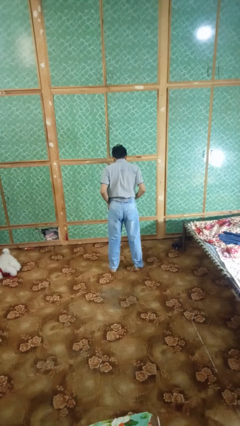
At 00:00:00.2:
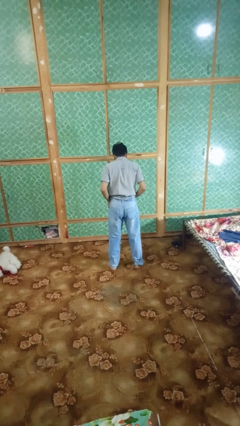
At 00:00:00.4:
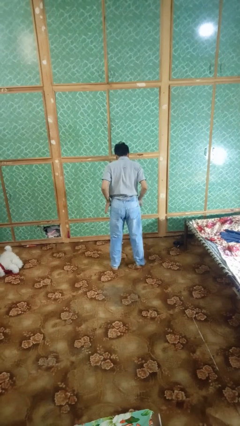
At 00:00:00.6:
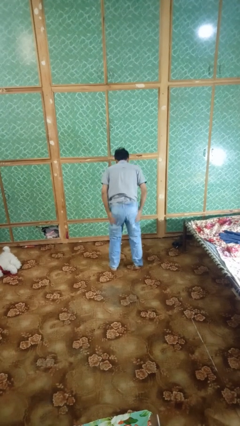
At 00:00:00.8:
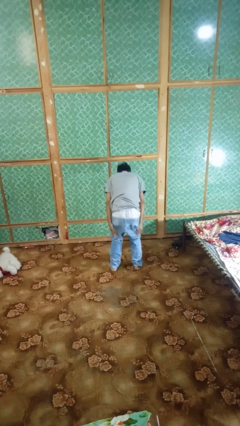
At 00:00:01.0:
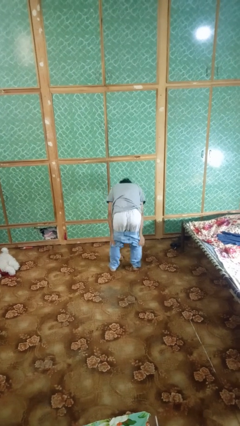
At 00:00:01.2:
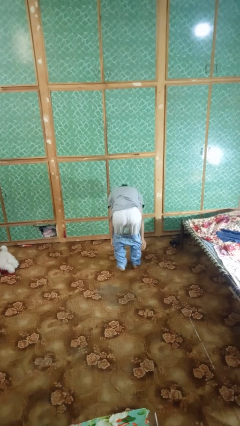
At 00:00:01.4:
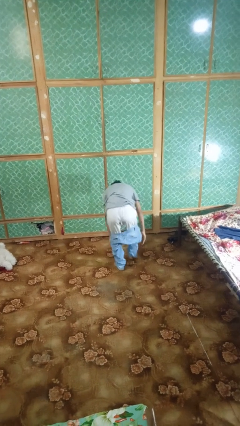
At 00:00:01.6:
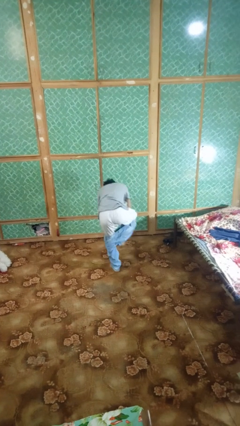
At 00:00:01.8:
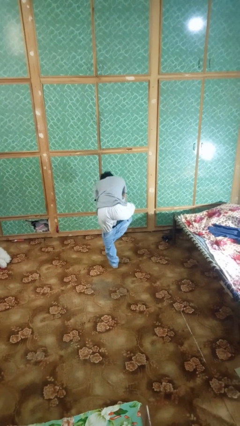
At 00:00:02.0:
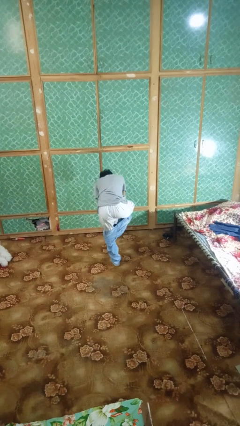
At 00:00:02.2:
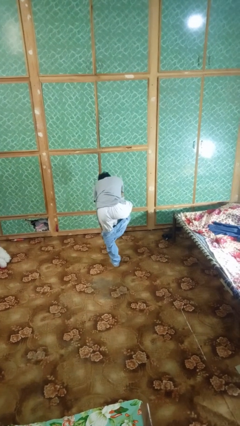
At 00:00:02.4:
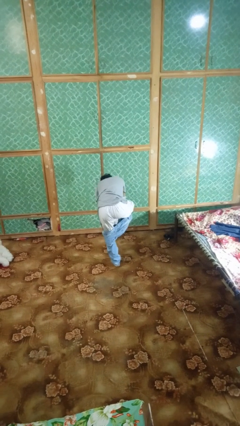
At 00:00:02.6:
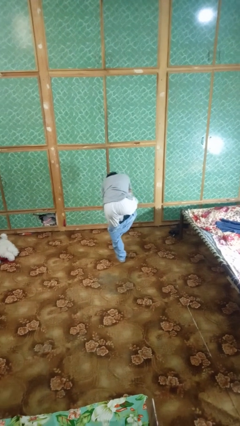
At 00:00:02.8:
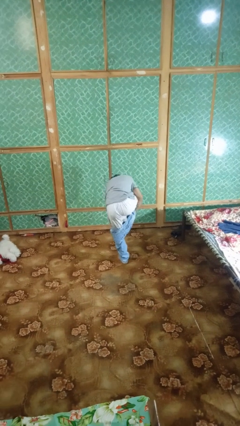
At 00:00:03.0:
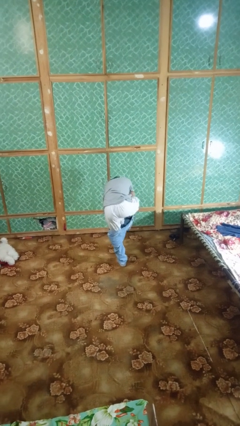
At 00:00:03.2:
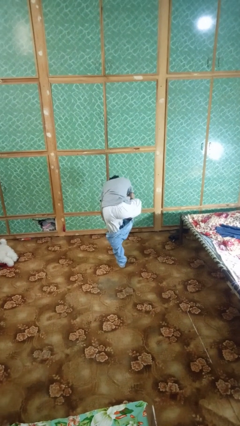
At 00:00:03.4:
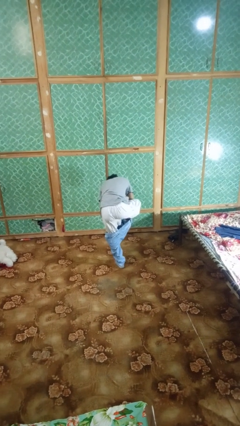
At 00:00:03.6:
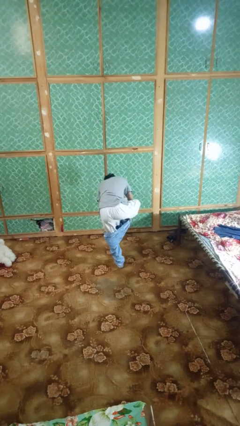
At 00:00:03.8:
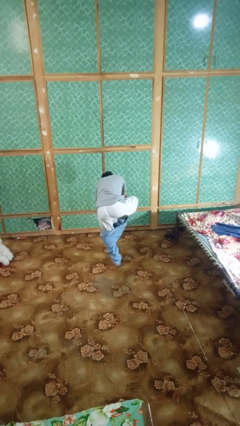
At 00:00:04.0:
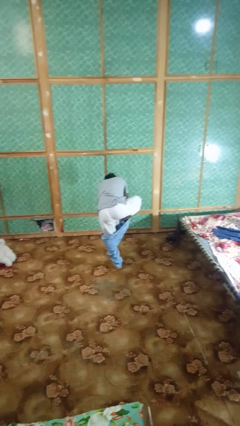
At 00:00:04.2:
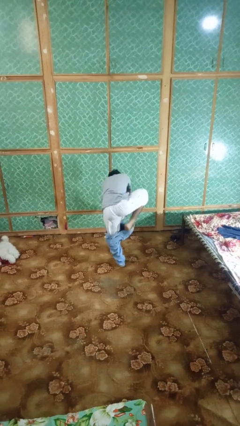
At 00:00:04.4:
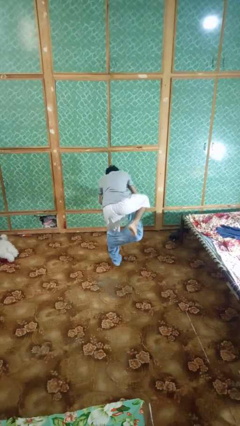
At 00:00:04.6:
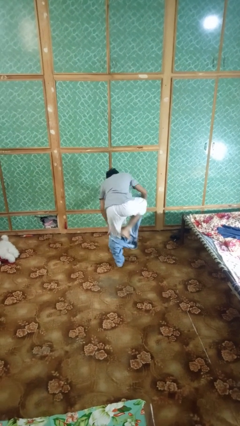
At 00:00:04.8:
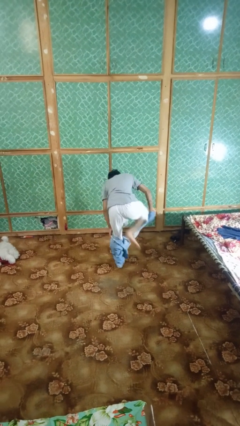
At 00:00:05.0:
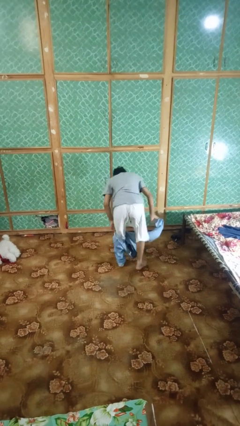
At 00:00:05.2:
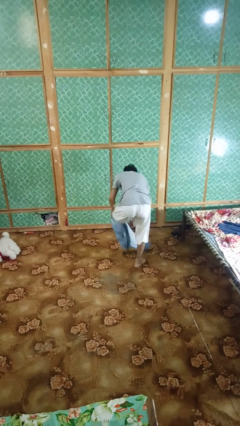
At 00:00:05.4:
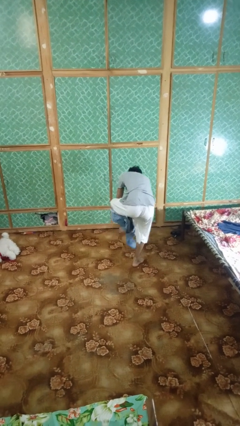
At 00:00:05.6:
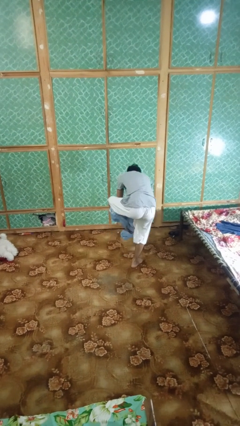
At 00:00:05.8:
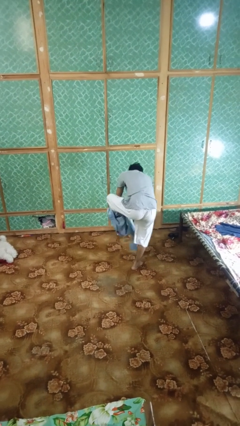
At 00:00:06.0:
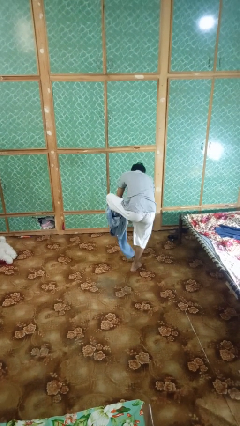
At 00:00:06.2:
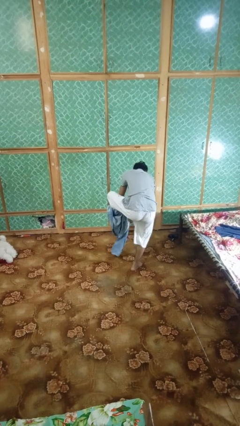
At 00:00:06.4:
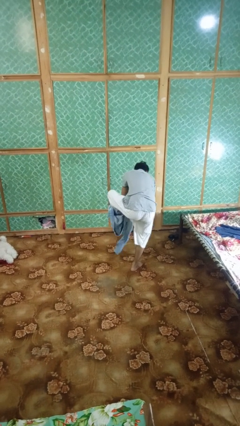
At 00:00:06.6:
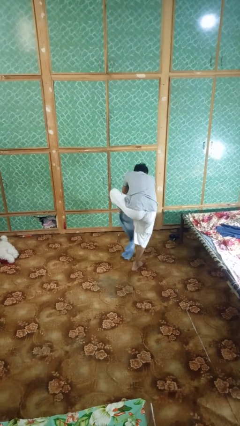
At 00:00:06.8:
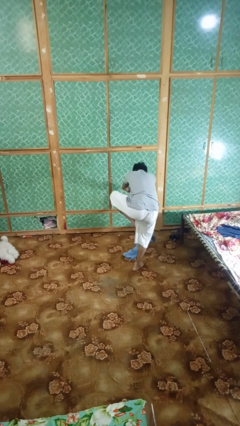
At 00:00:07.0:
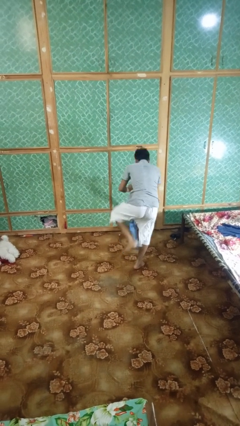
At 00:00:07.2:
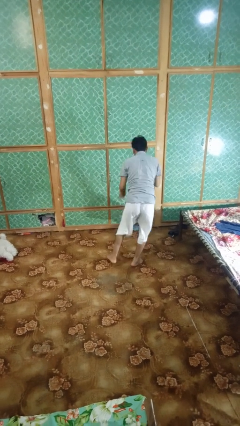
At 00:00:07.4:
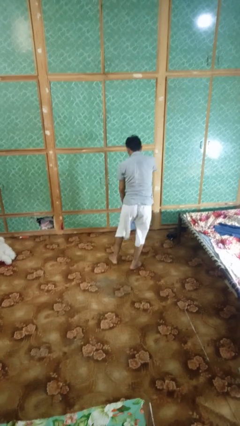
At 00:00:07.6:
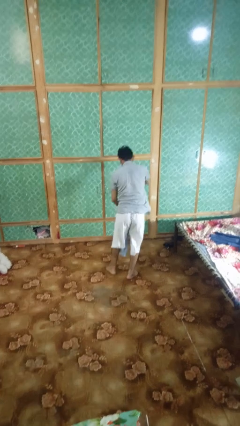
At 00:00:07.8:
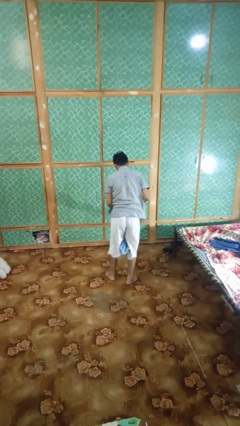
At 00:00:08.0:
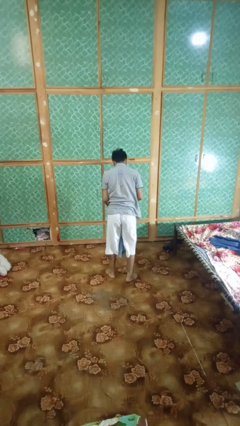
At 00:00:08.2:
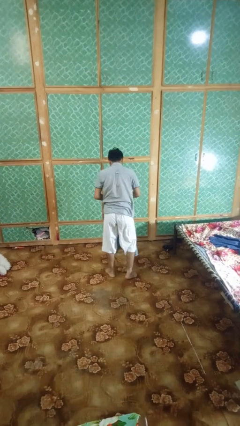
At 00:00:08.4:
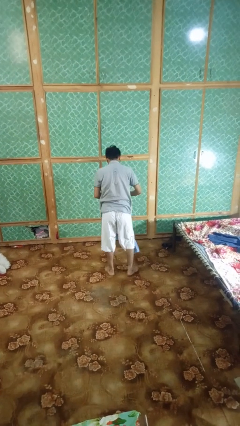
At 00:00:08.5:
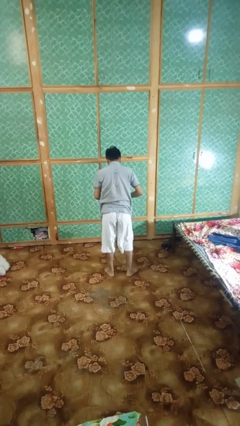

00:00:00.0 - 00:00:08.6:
person takes off pants

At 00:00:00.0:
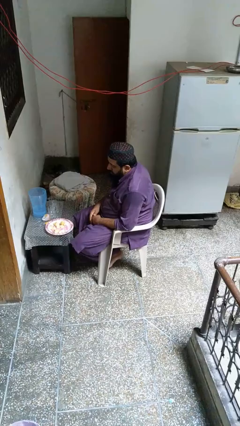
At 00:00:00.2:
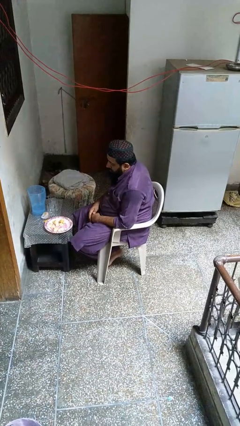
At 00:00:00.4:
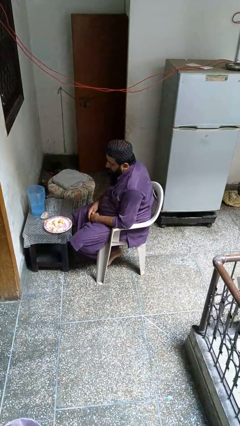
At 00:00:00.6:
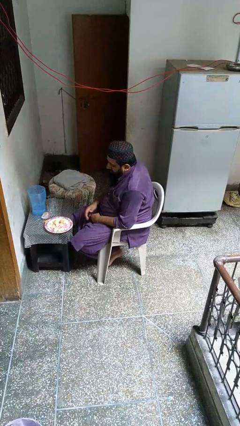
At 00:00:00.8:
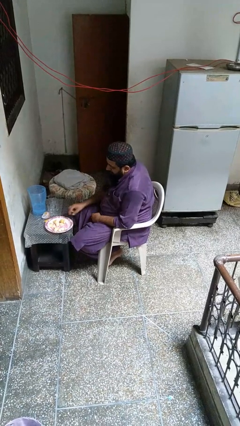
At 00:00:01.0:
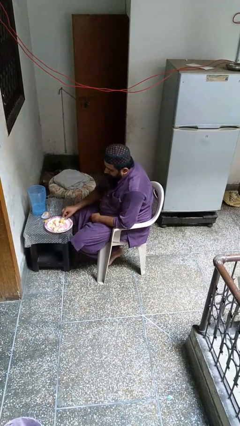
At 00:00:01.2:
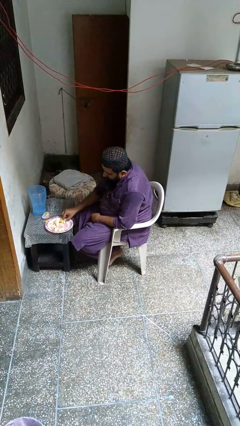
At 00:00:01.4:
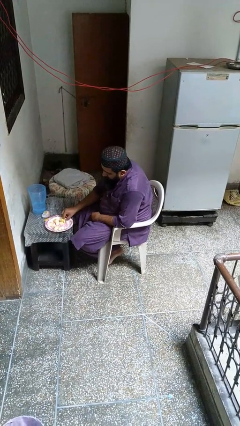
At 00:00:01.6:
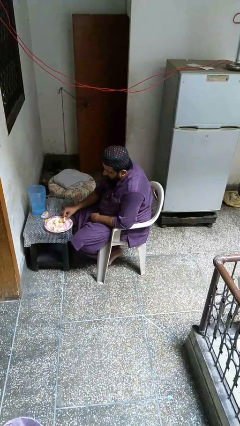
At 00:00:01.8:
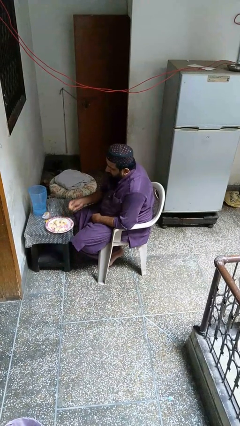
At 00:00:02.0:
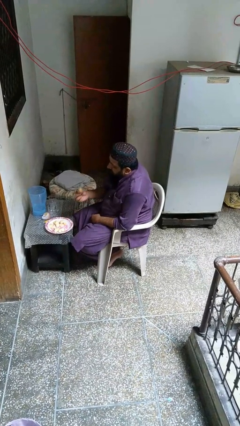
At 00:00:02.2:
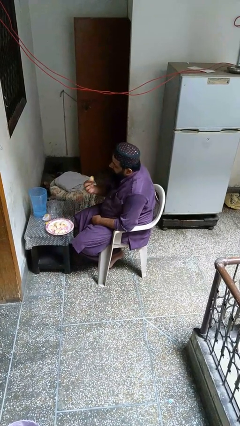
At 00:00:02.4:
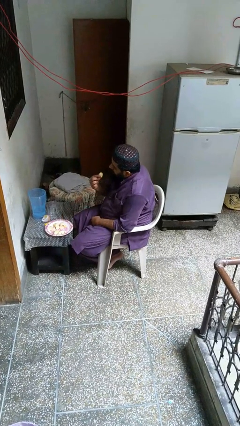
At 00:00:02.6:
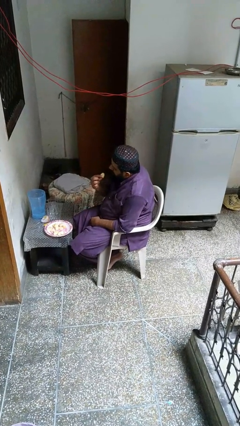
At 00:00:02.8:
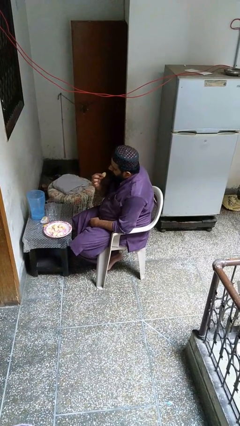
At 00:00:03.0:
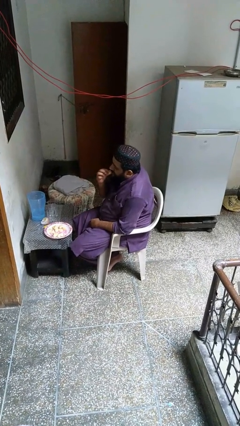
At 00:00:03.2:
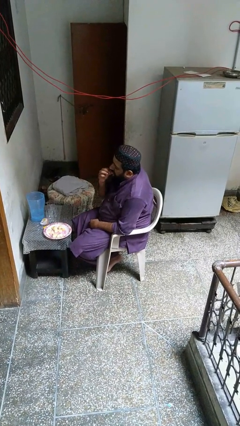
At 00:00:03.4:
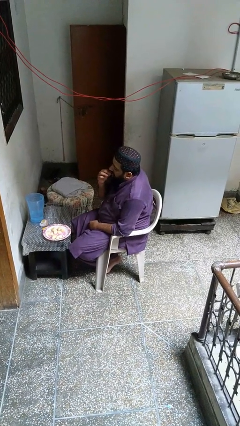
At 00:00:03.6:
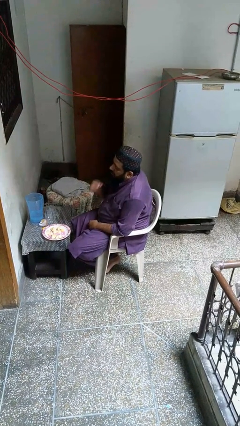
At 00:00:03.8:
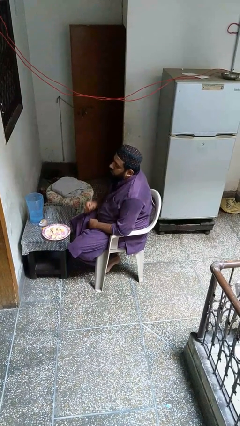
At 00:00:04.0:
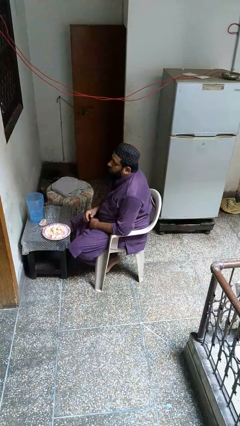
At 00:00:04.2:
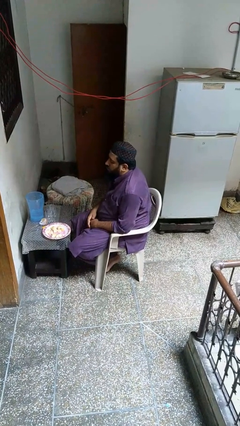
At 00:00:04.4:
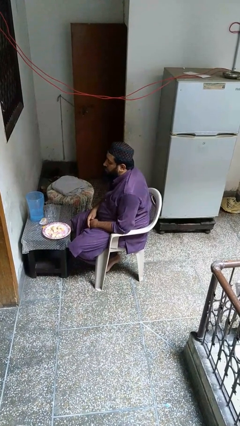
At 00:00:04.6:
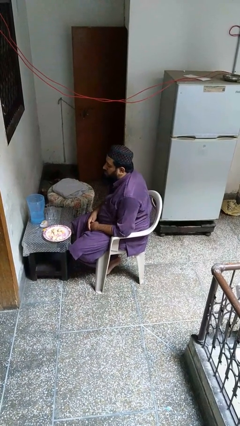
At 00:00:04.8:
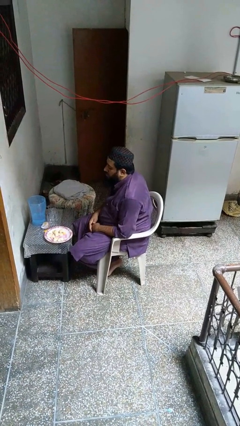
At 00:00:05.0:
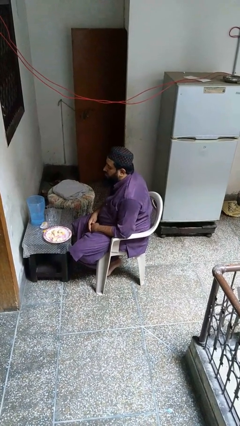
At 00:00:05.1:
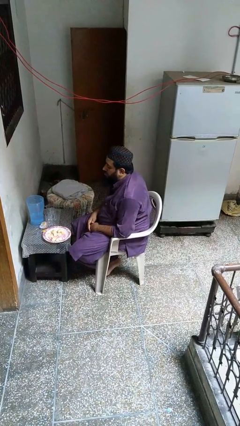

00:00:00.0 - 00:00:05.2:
person eats with hands

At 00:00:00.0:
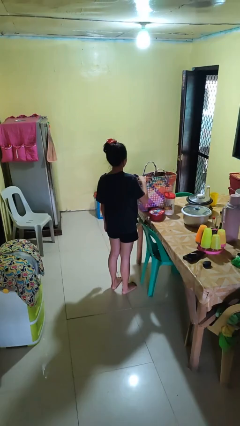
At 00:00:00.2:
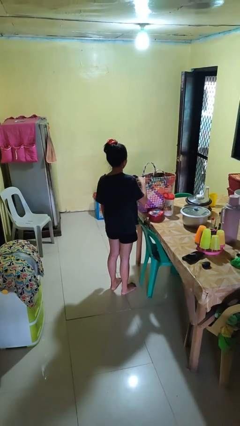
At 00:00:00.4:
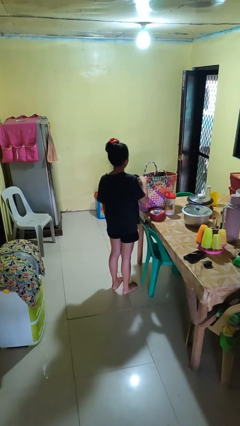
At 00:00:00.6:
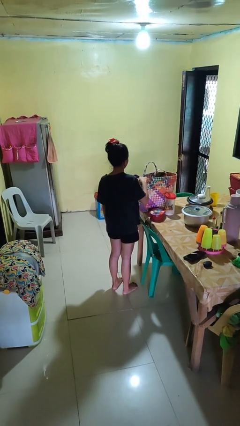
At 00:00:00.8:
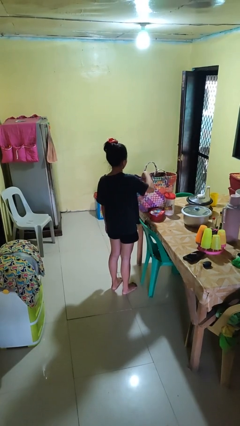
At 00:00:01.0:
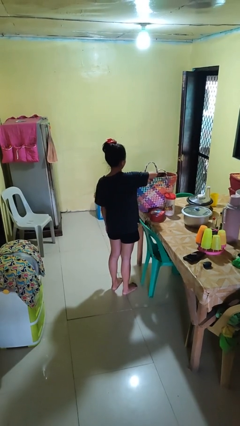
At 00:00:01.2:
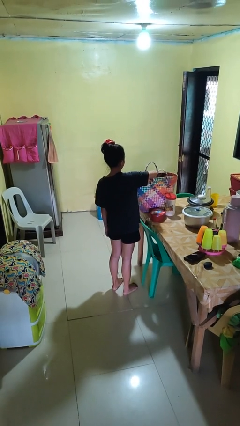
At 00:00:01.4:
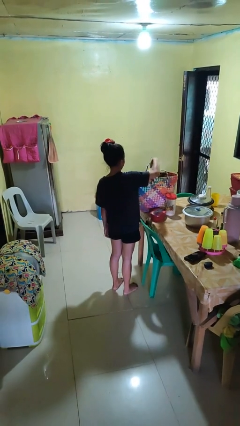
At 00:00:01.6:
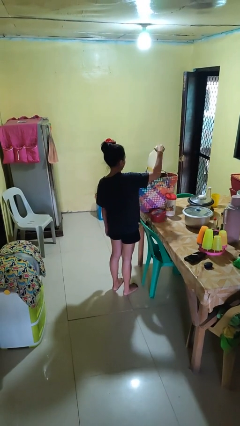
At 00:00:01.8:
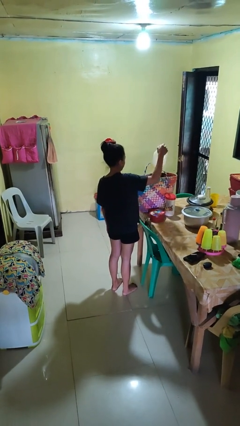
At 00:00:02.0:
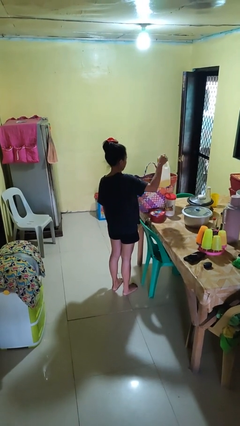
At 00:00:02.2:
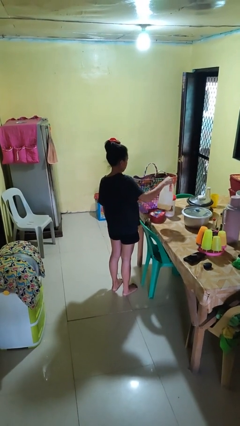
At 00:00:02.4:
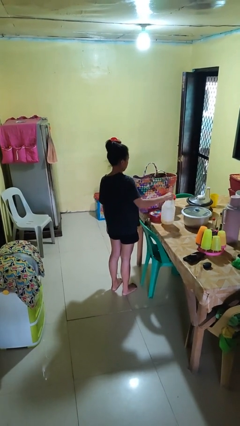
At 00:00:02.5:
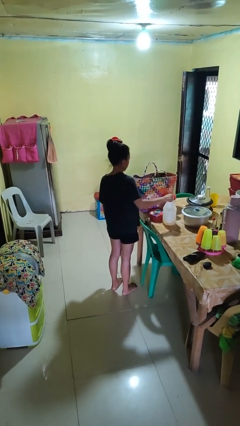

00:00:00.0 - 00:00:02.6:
person takes object from basket

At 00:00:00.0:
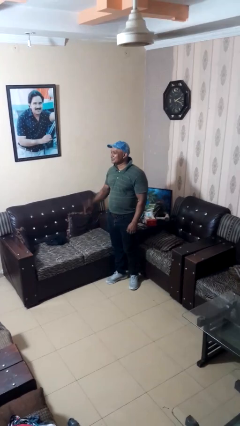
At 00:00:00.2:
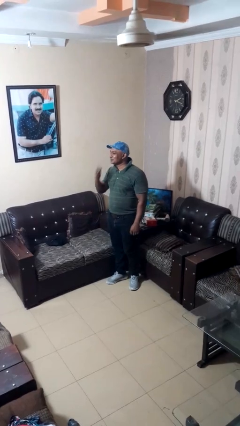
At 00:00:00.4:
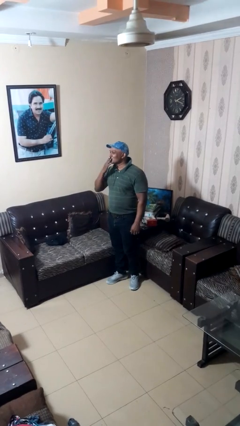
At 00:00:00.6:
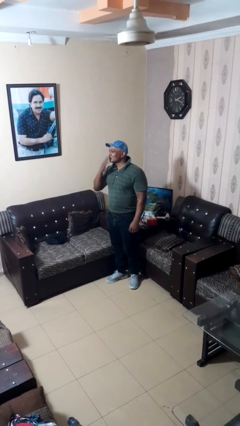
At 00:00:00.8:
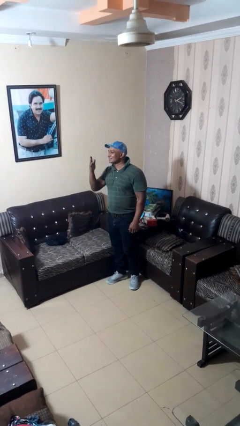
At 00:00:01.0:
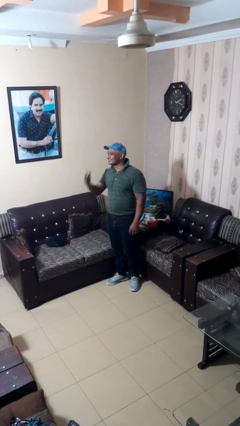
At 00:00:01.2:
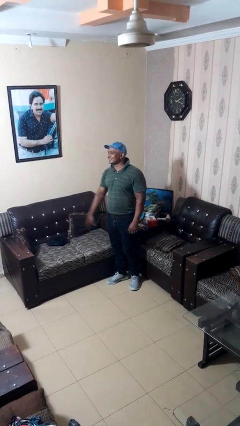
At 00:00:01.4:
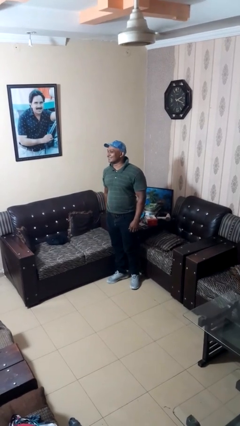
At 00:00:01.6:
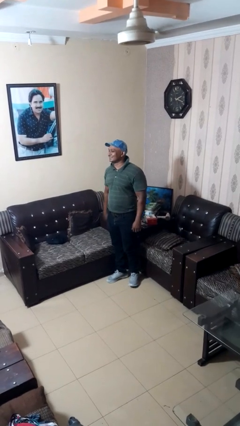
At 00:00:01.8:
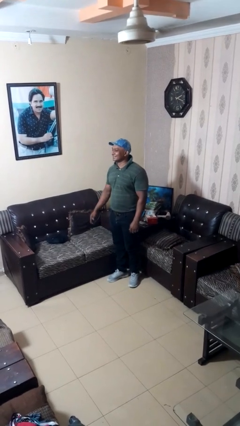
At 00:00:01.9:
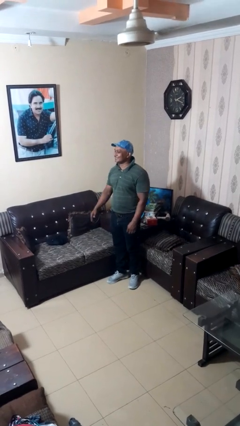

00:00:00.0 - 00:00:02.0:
person gestures blow kiss
